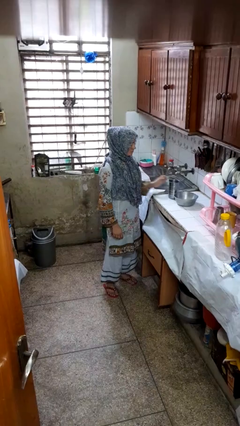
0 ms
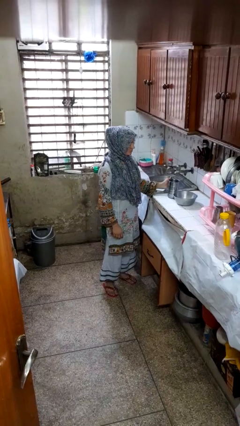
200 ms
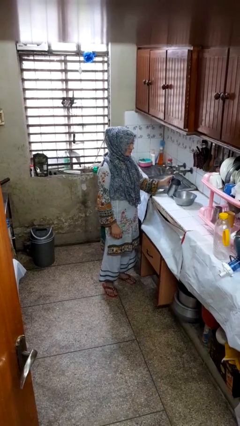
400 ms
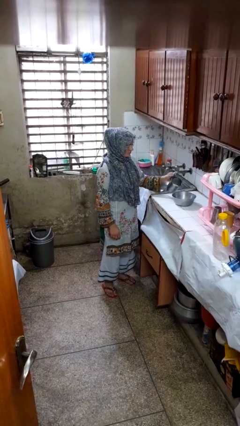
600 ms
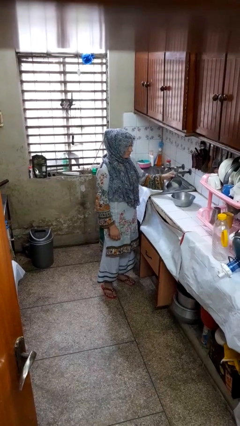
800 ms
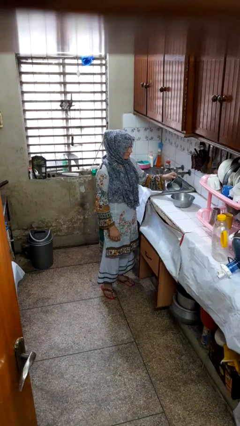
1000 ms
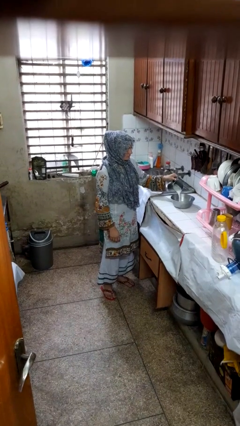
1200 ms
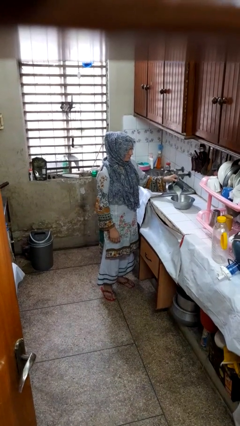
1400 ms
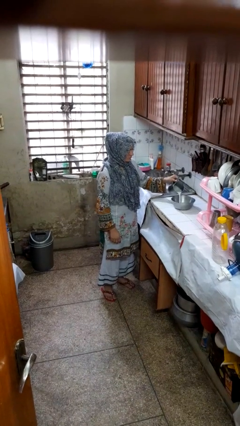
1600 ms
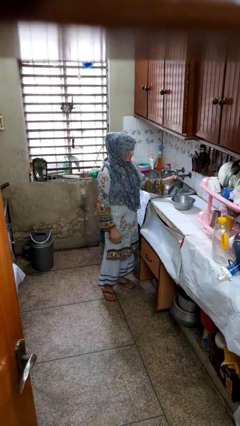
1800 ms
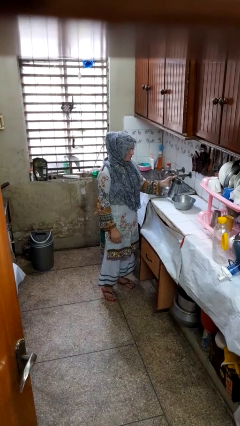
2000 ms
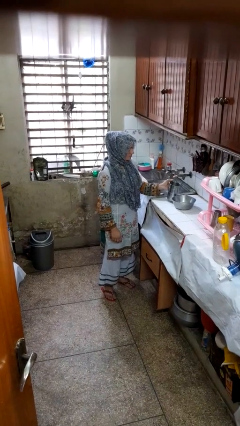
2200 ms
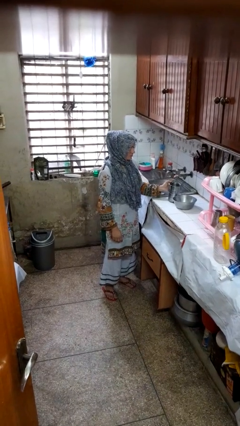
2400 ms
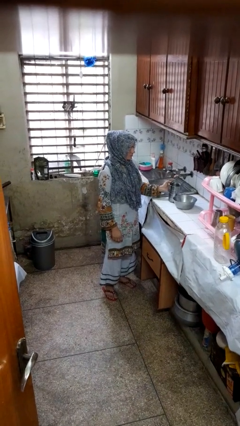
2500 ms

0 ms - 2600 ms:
person pours into bowl

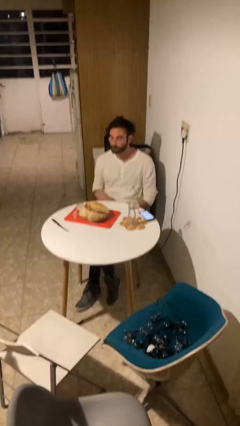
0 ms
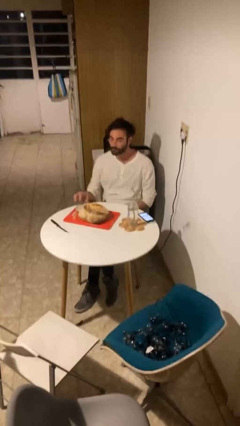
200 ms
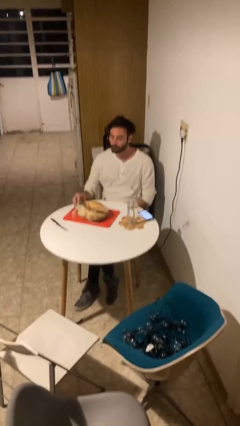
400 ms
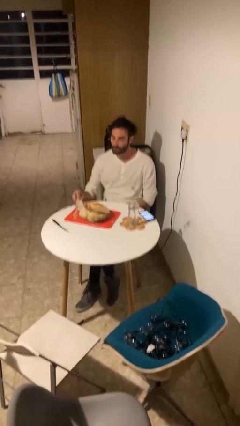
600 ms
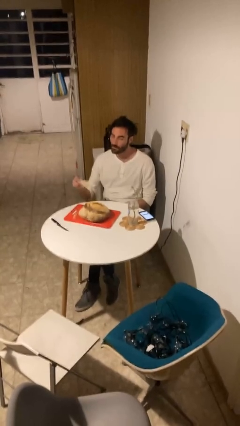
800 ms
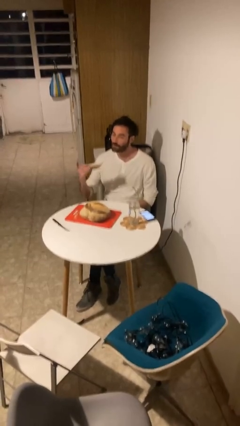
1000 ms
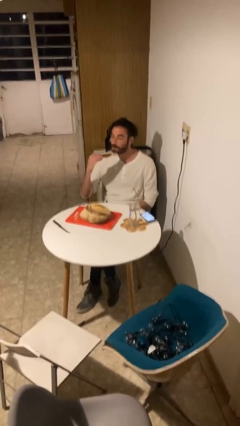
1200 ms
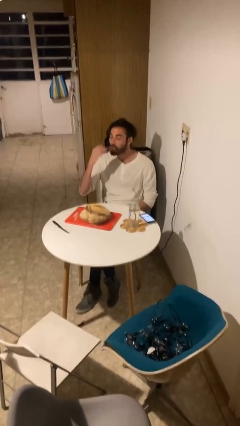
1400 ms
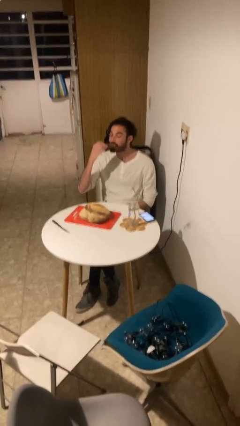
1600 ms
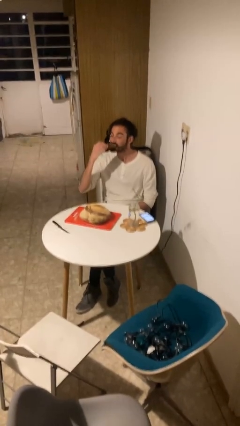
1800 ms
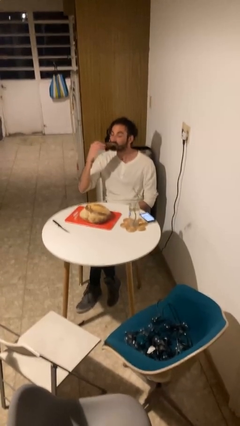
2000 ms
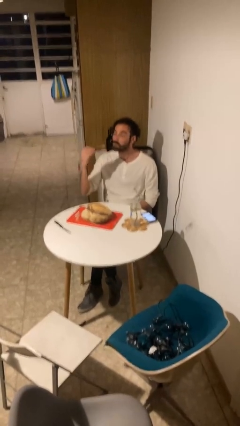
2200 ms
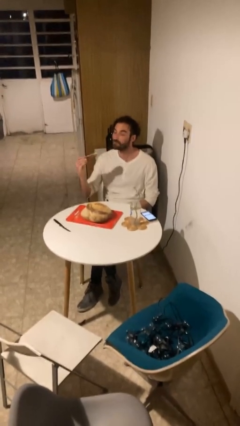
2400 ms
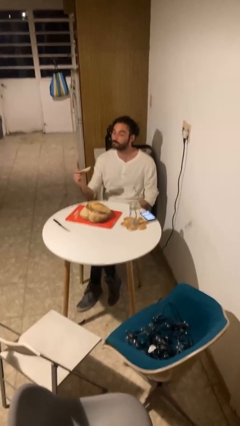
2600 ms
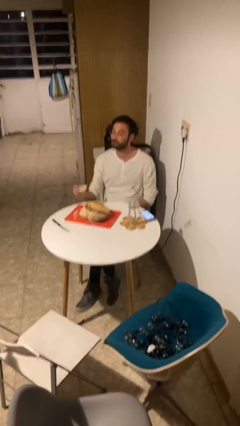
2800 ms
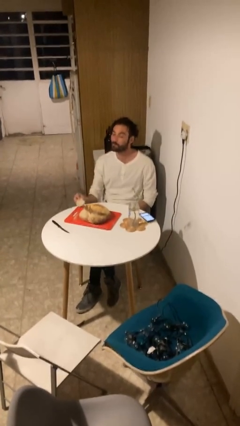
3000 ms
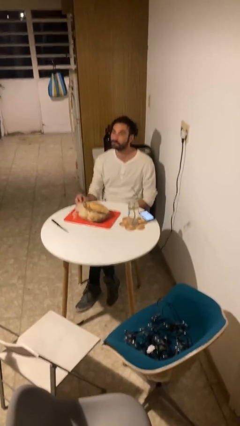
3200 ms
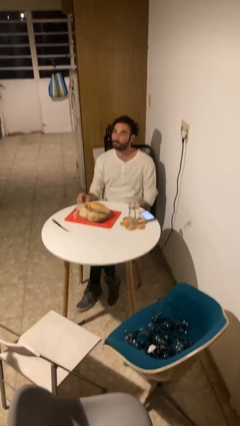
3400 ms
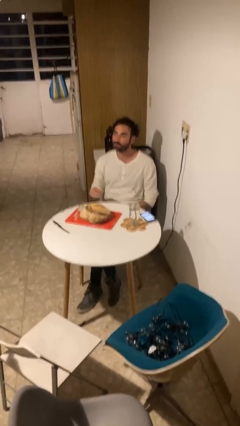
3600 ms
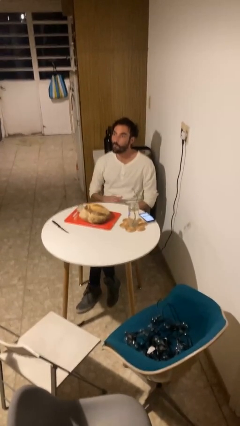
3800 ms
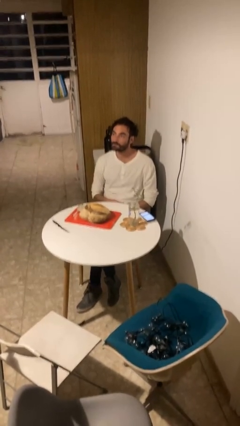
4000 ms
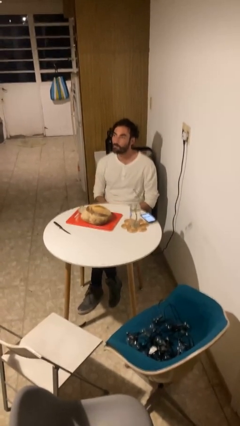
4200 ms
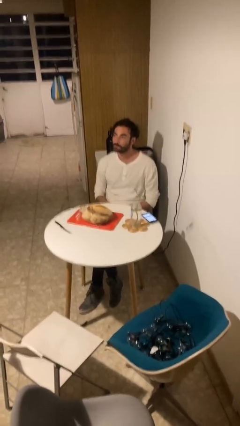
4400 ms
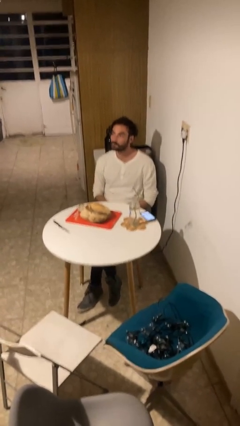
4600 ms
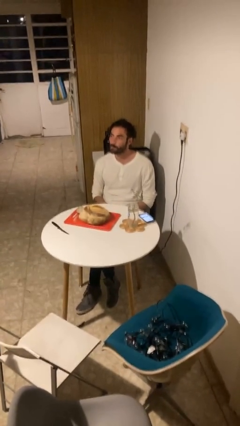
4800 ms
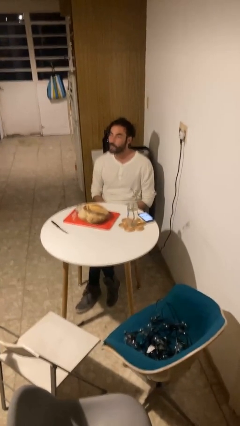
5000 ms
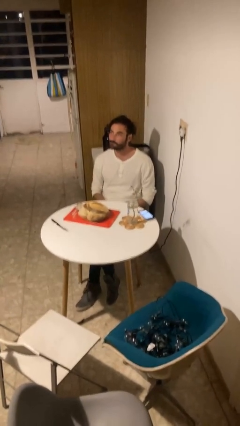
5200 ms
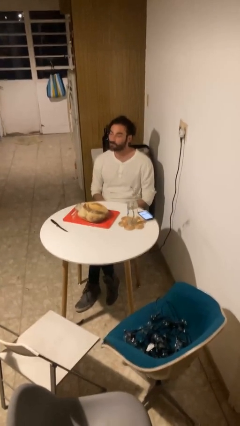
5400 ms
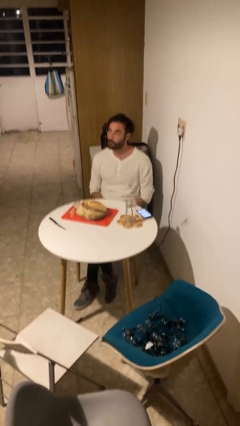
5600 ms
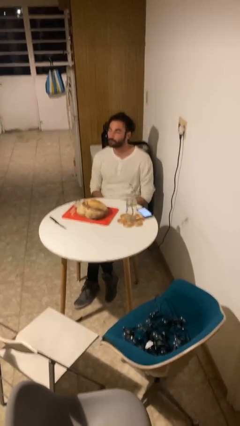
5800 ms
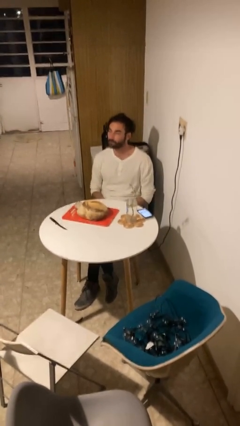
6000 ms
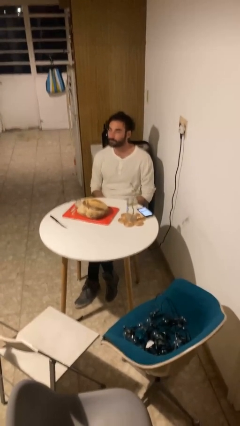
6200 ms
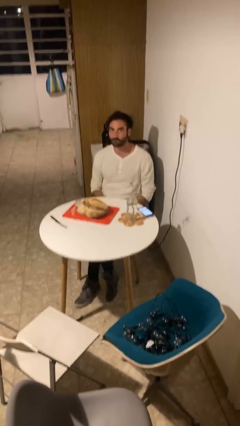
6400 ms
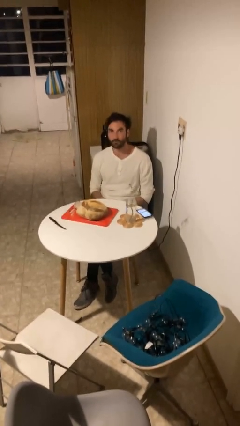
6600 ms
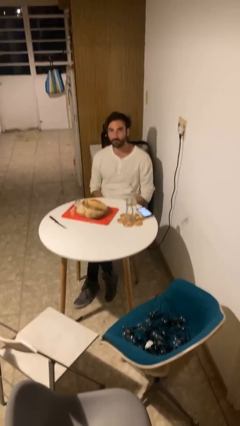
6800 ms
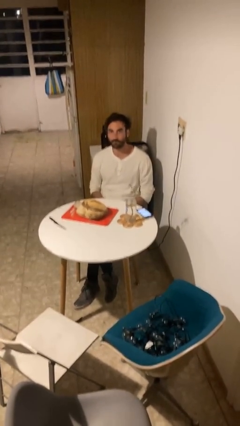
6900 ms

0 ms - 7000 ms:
person eats with hands

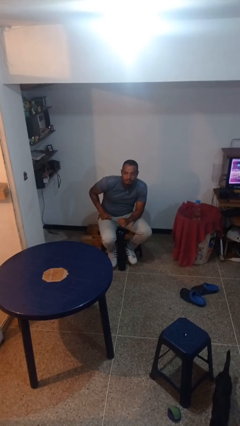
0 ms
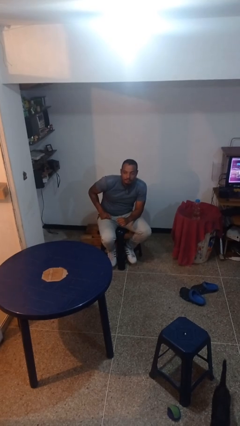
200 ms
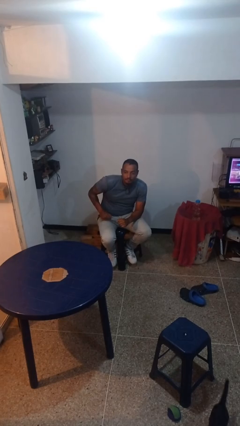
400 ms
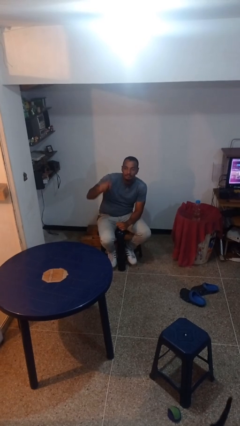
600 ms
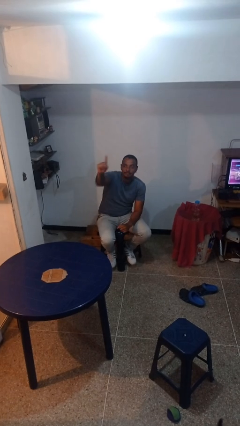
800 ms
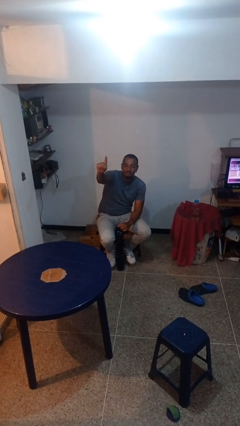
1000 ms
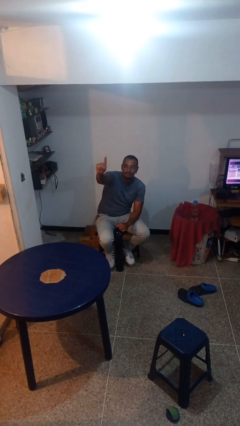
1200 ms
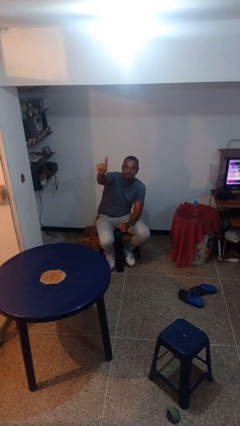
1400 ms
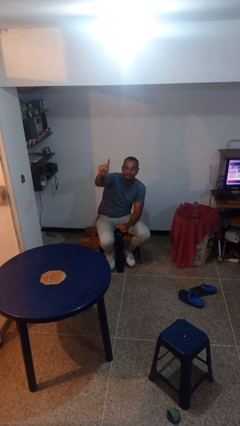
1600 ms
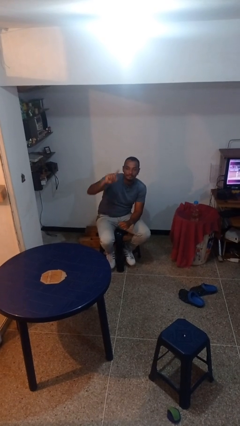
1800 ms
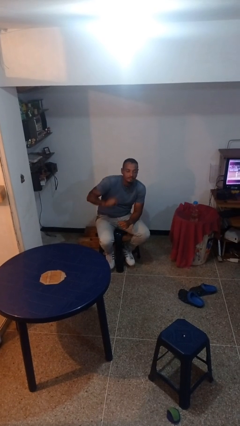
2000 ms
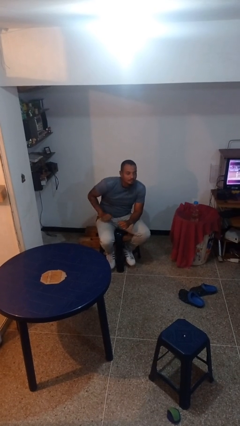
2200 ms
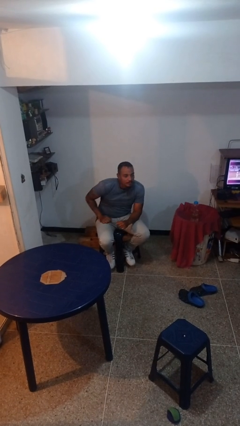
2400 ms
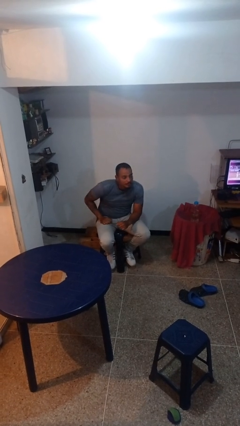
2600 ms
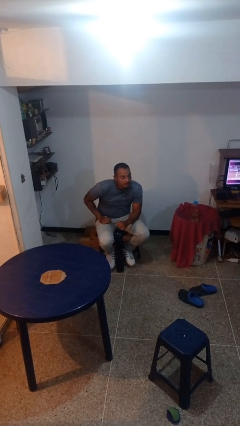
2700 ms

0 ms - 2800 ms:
person gestures number one

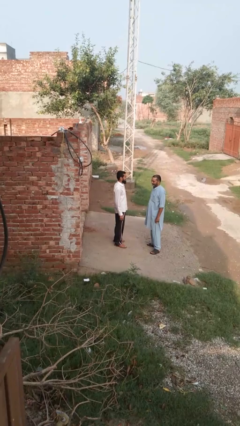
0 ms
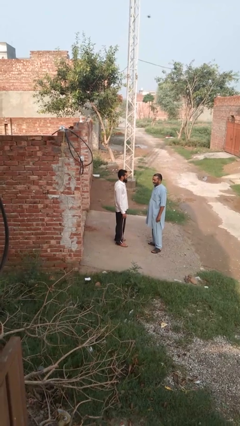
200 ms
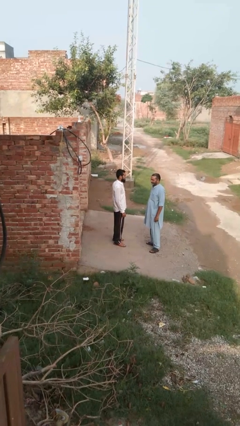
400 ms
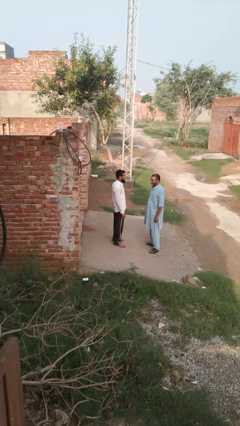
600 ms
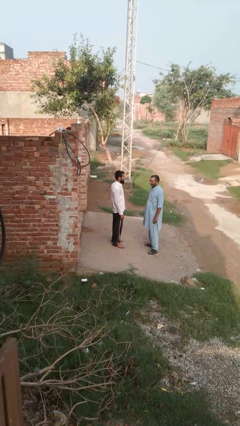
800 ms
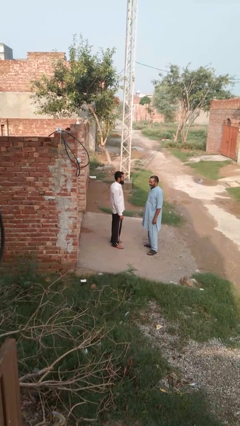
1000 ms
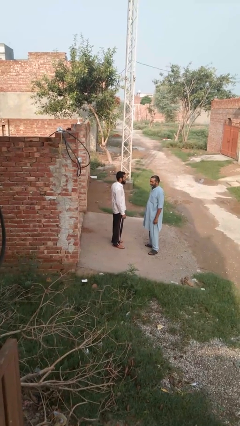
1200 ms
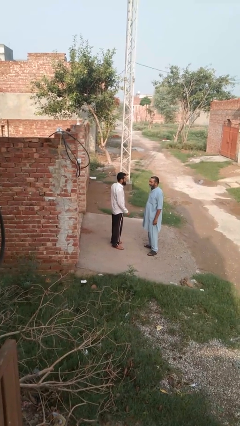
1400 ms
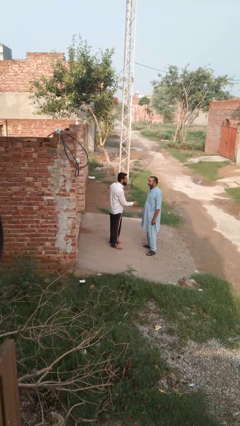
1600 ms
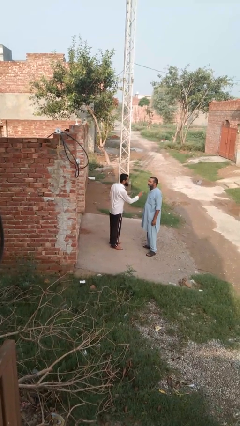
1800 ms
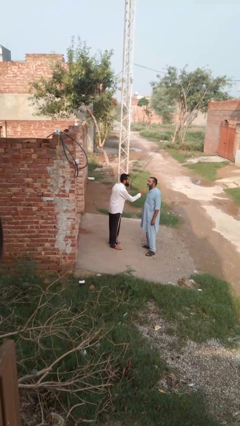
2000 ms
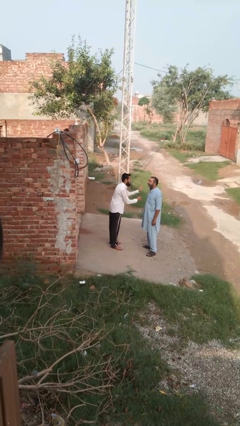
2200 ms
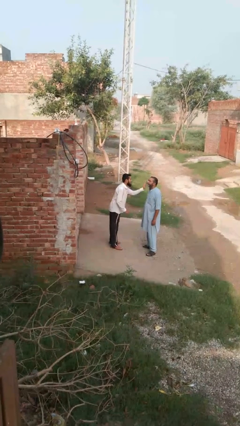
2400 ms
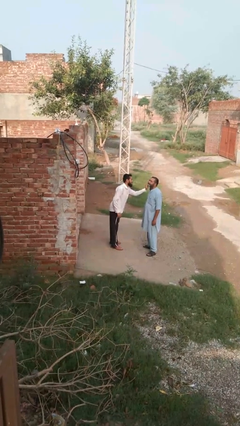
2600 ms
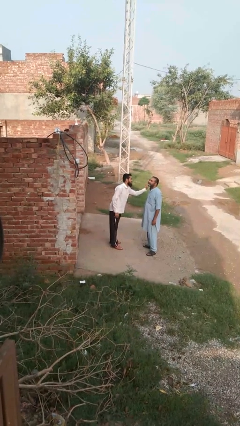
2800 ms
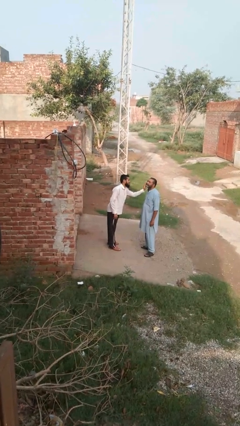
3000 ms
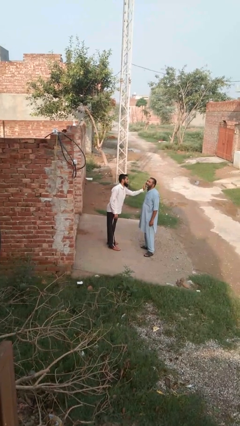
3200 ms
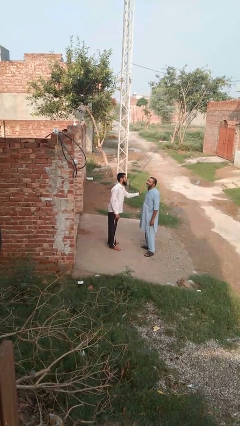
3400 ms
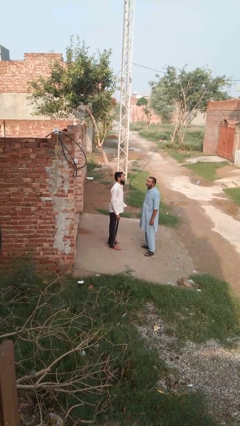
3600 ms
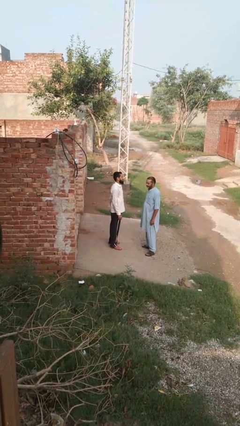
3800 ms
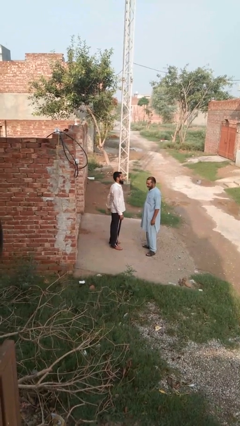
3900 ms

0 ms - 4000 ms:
person touches face of person

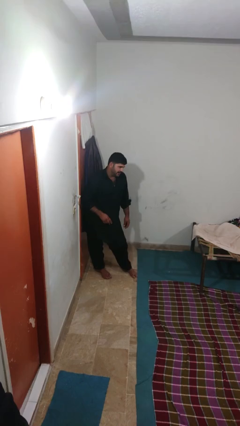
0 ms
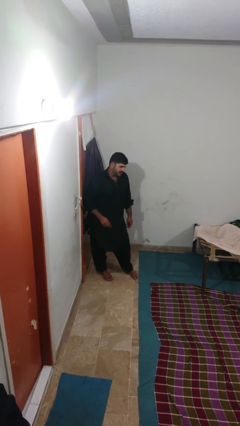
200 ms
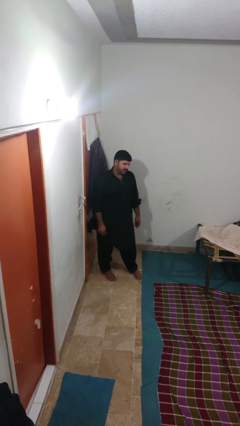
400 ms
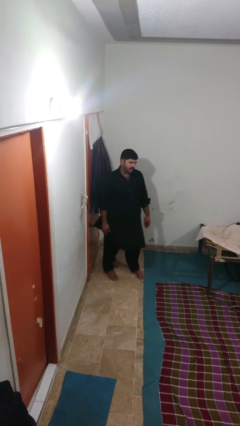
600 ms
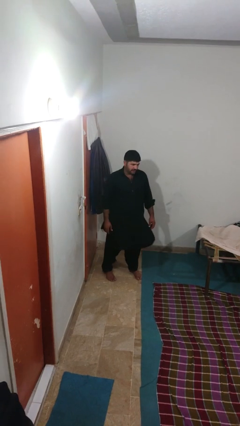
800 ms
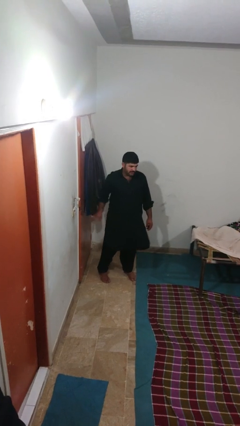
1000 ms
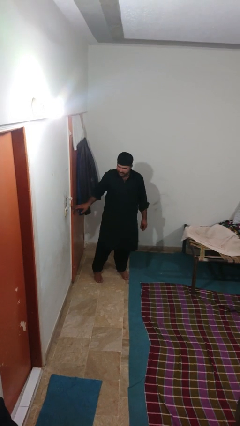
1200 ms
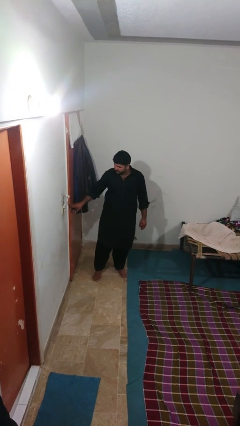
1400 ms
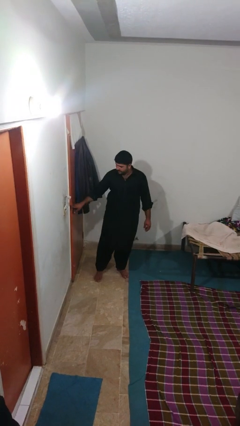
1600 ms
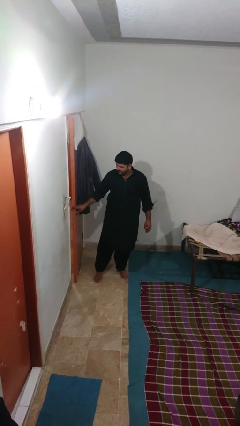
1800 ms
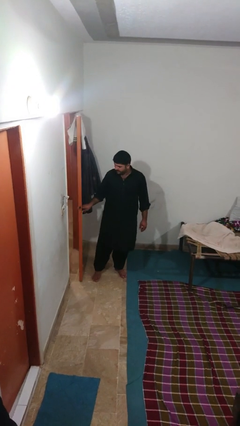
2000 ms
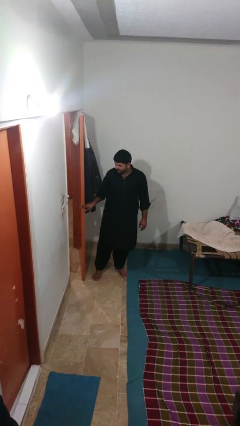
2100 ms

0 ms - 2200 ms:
person opens facility door
